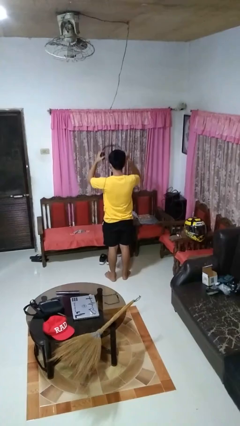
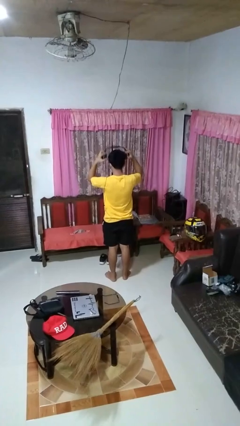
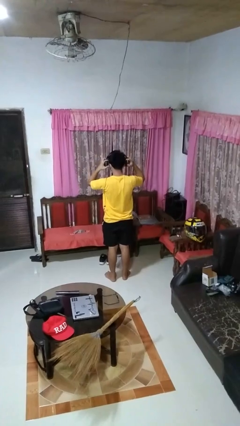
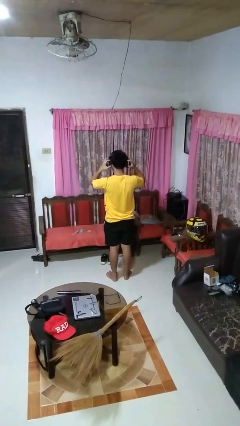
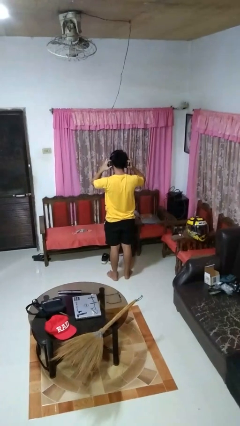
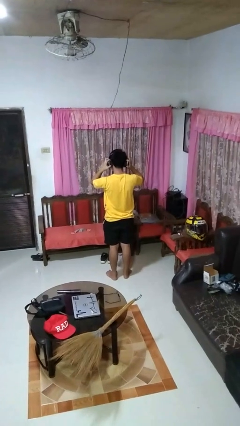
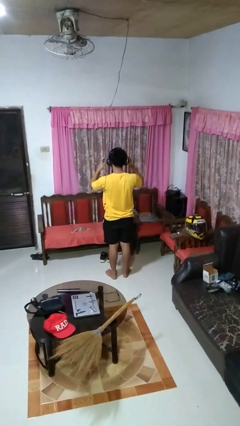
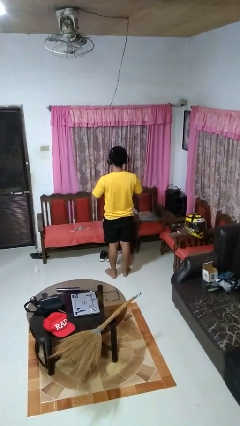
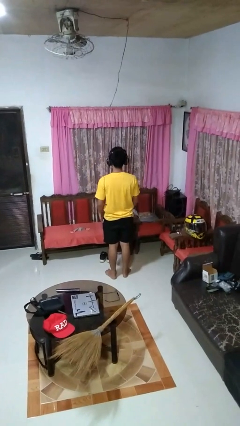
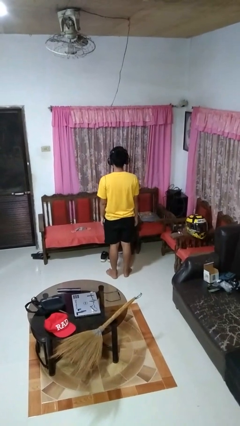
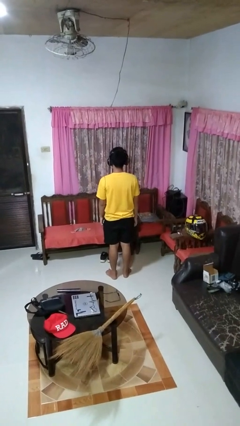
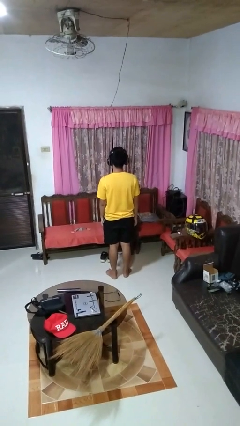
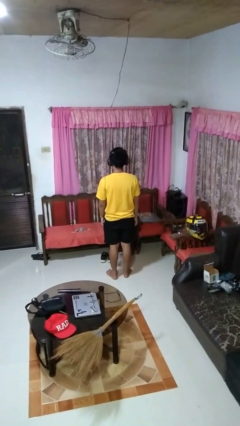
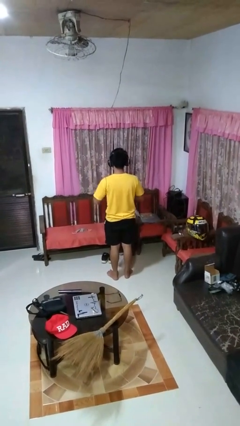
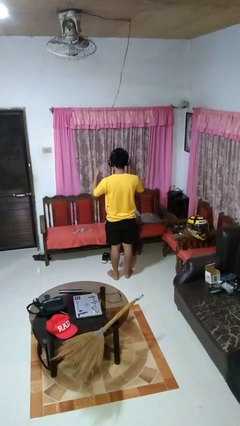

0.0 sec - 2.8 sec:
person puts on headphones

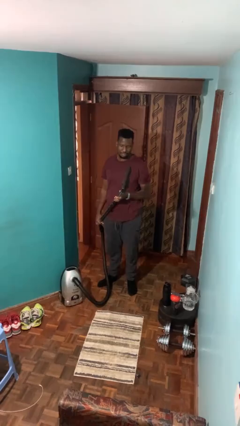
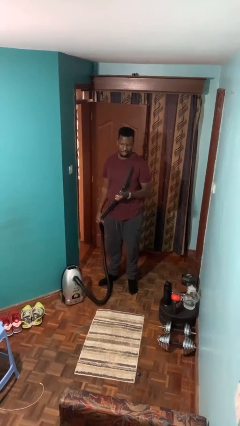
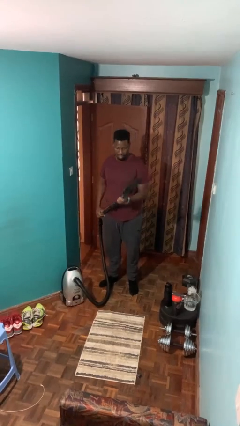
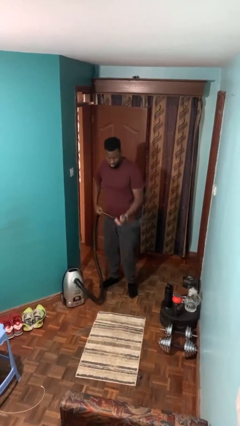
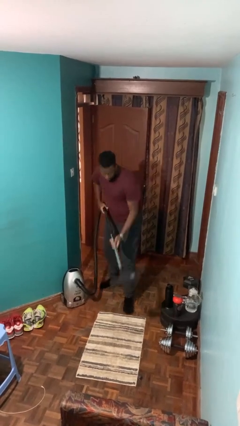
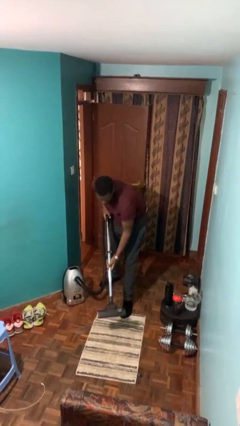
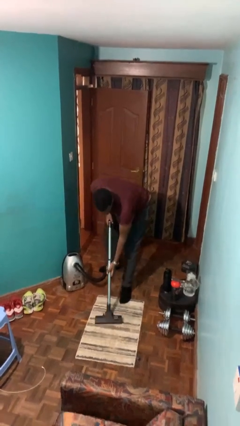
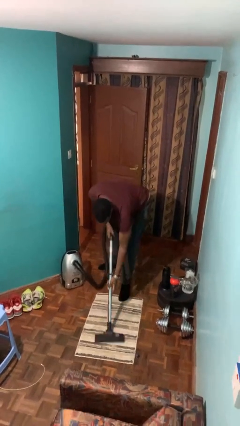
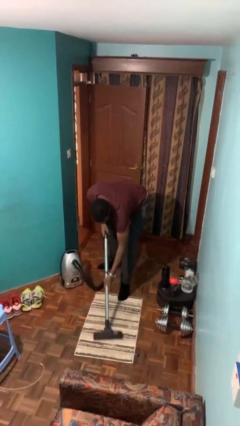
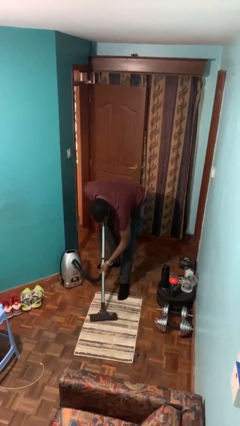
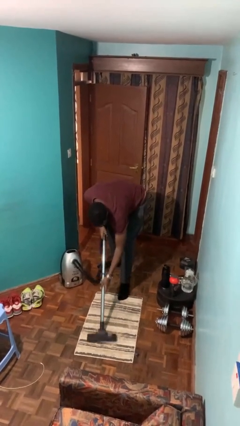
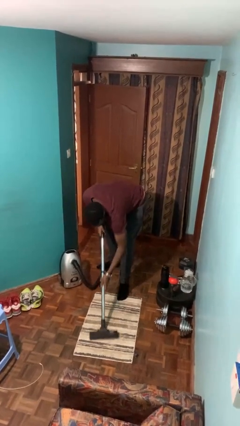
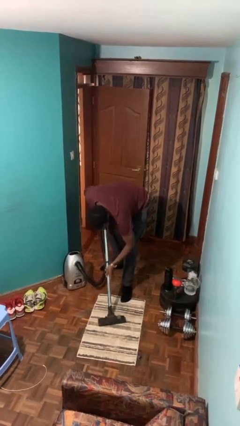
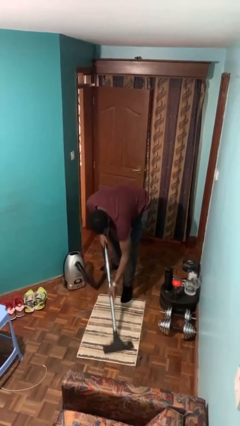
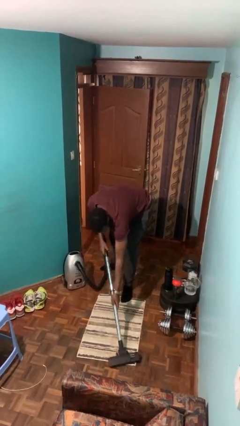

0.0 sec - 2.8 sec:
person vacuums carpet

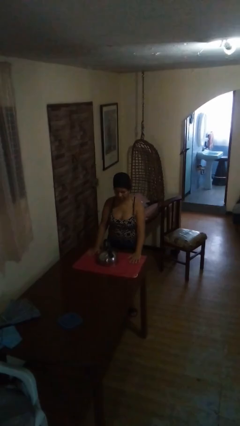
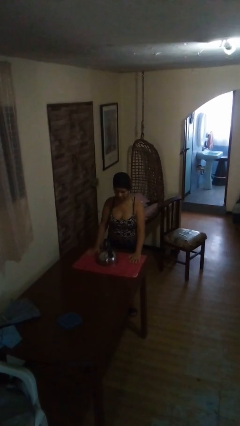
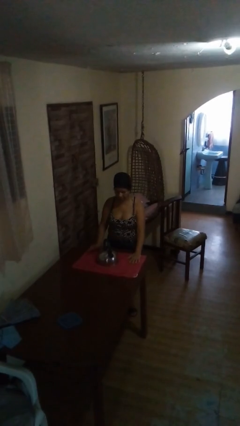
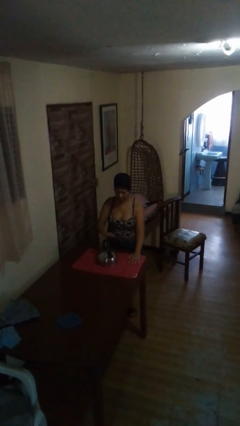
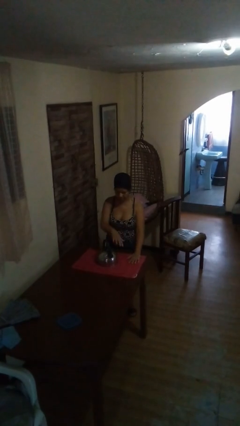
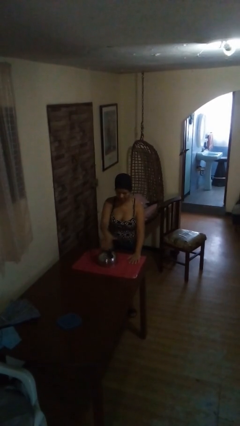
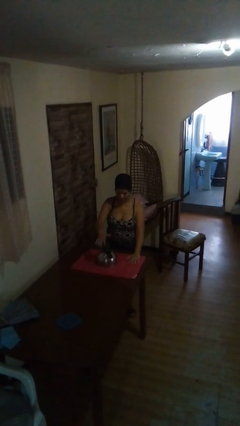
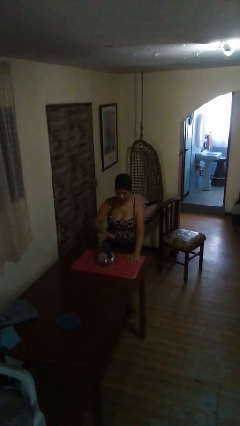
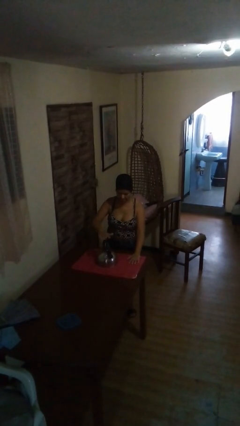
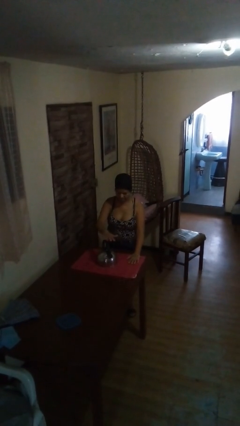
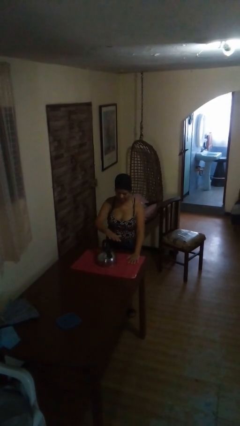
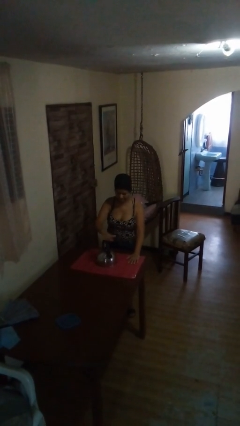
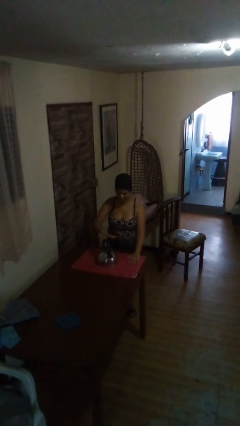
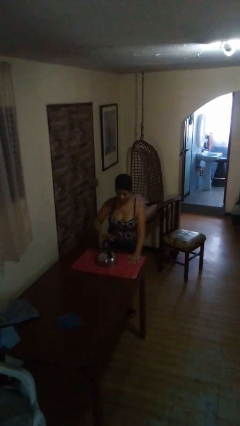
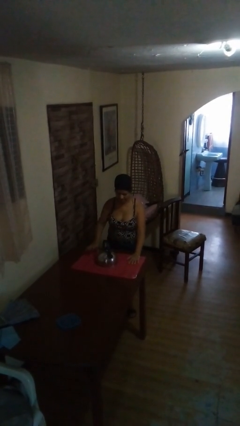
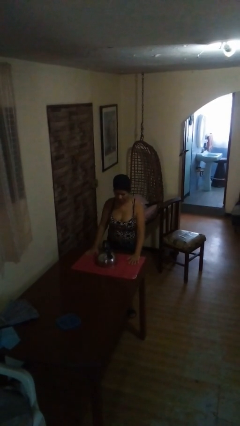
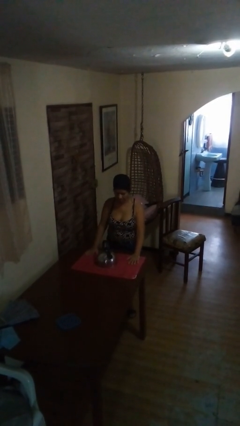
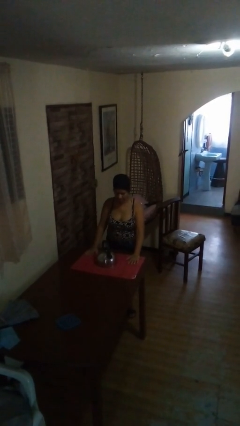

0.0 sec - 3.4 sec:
person waves hand over object

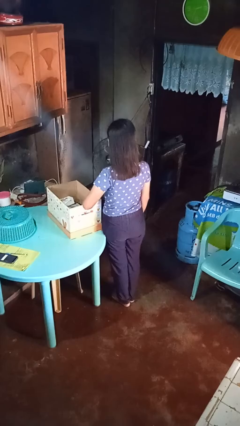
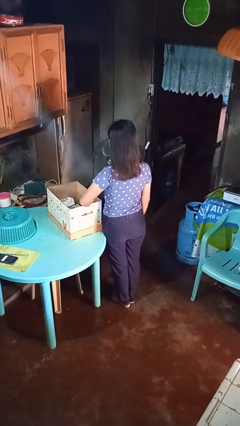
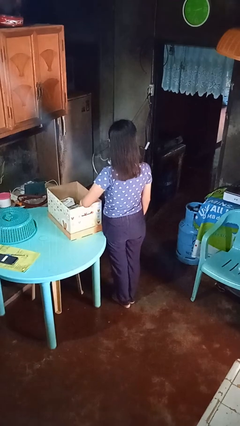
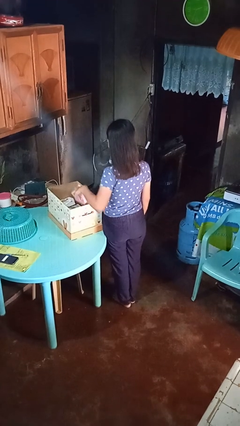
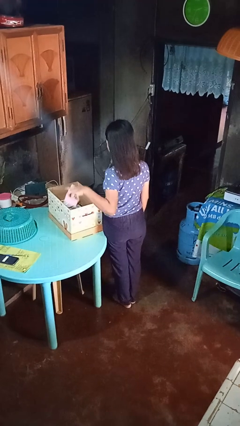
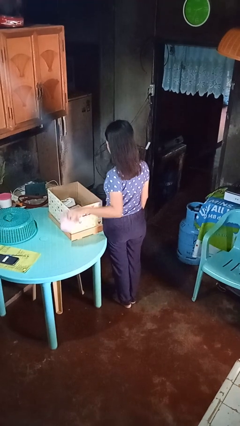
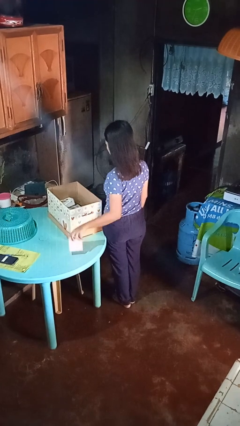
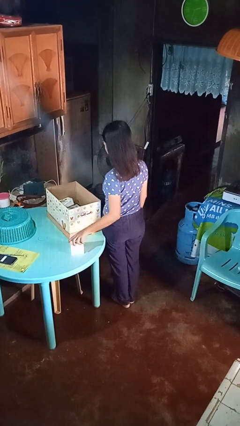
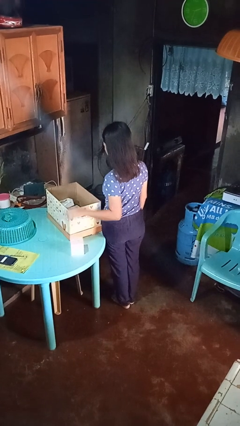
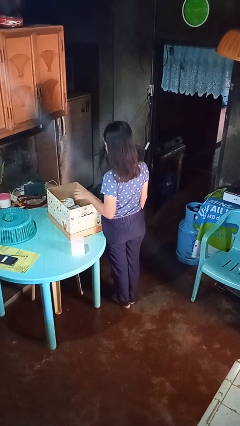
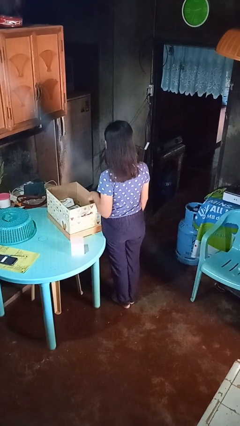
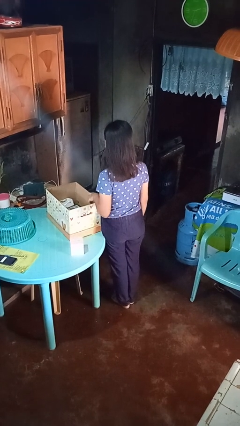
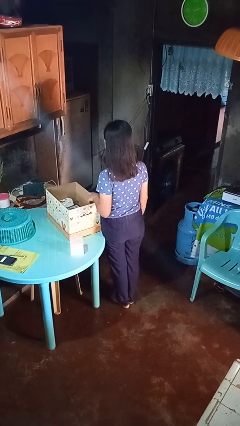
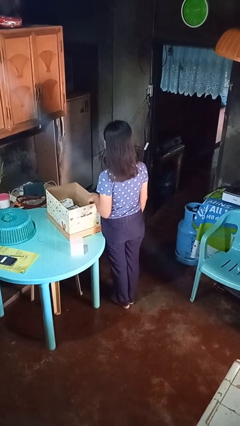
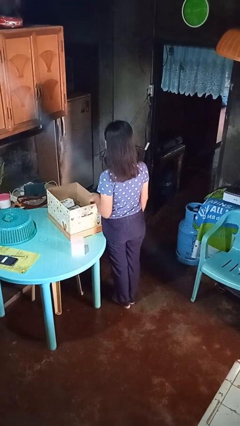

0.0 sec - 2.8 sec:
person takes object from box

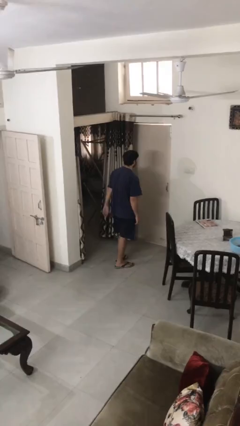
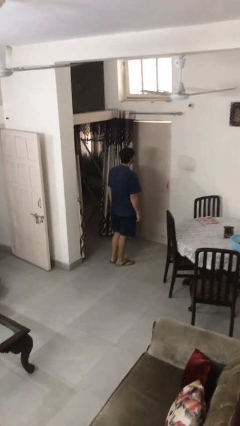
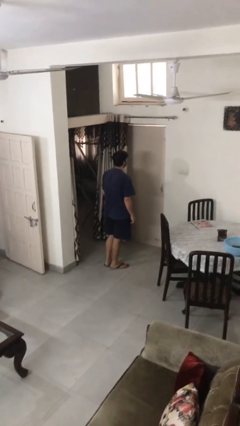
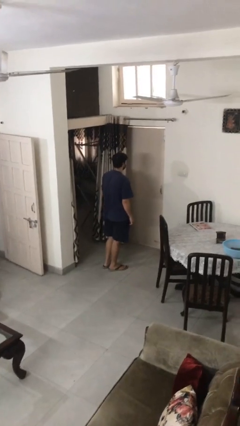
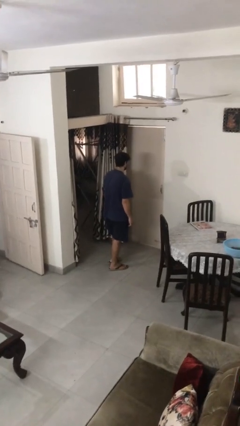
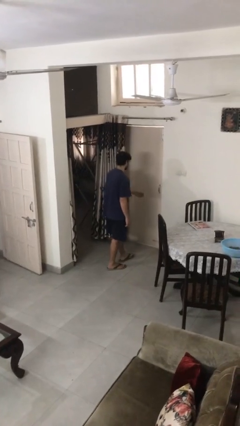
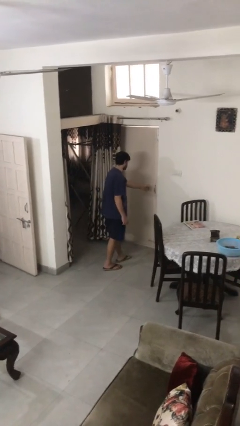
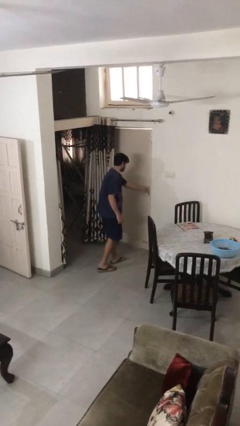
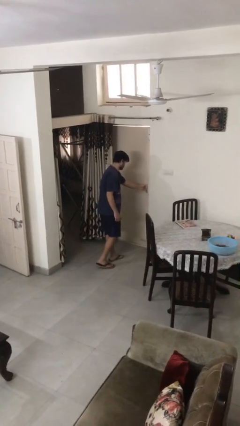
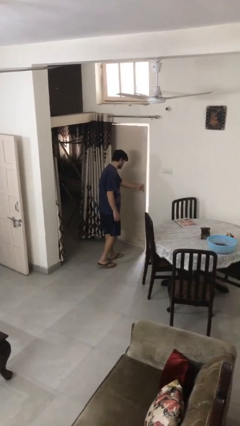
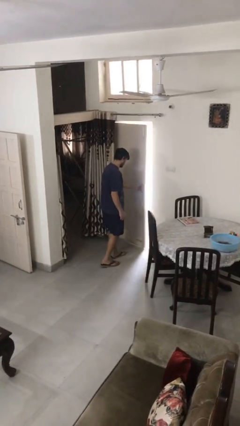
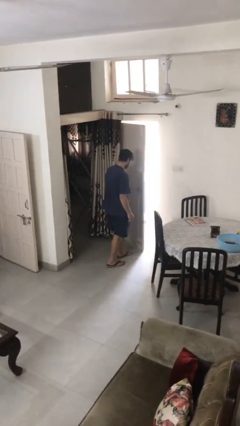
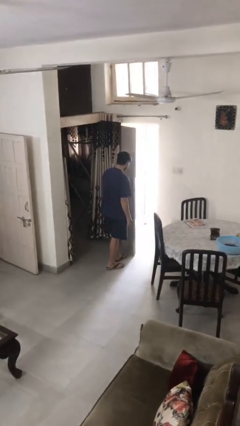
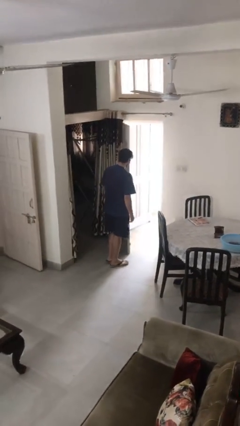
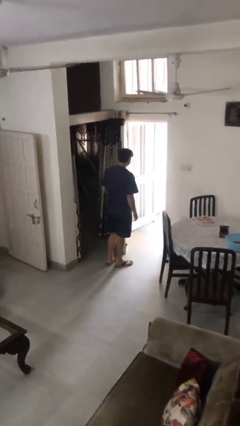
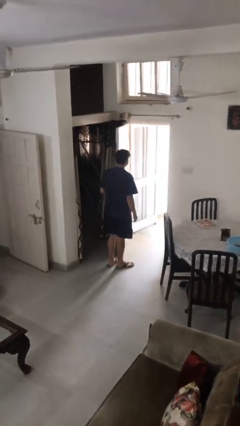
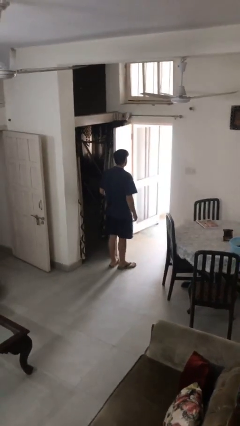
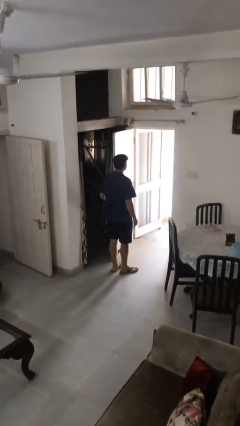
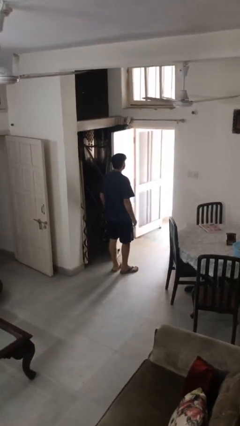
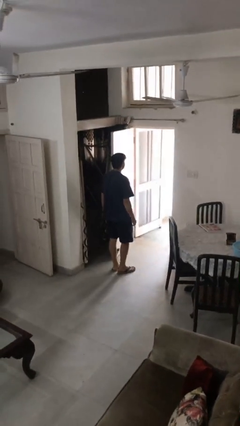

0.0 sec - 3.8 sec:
person opens facility door

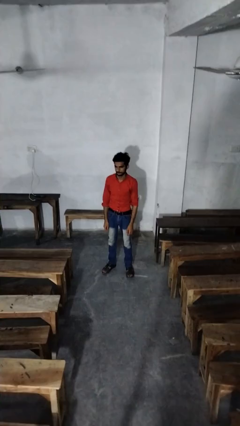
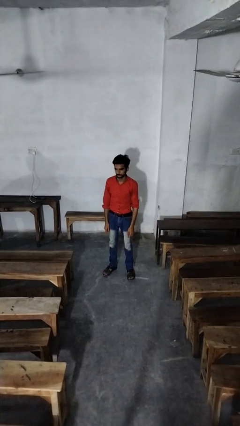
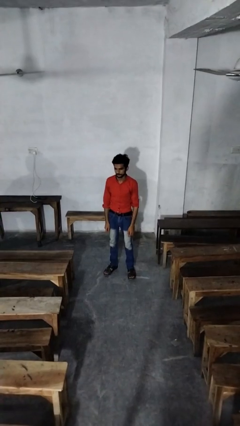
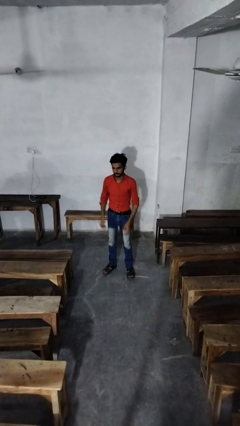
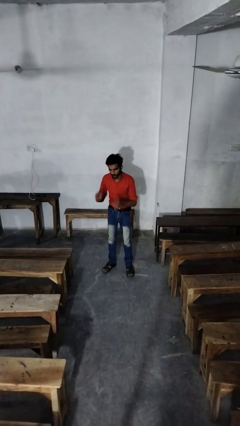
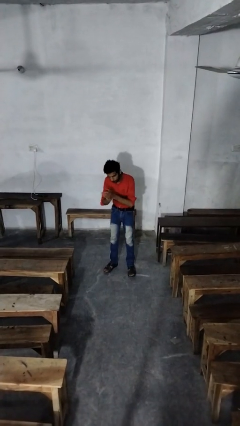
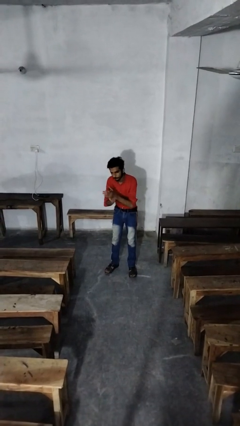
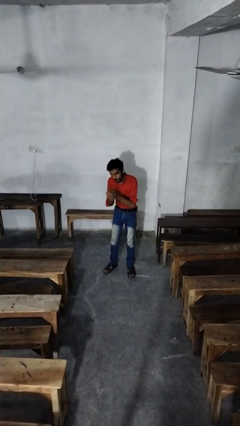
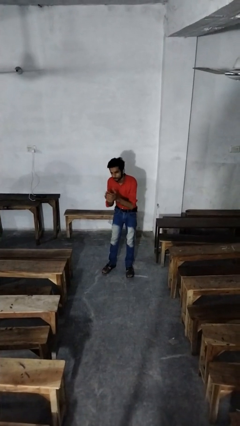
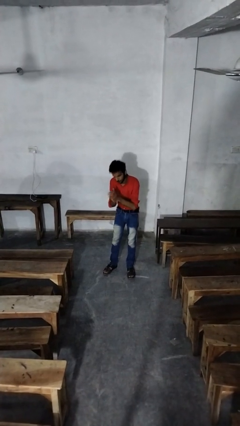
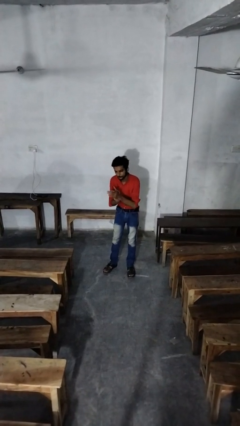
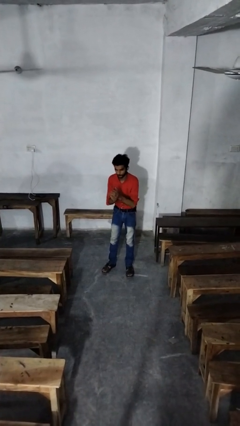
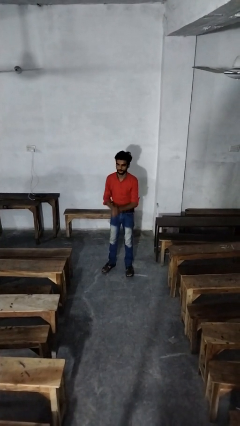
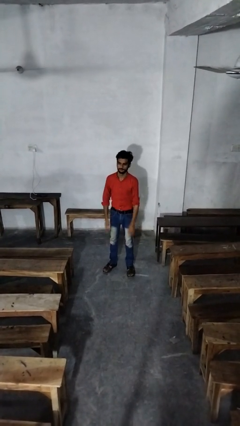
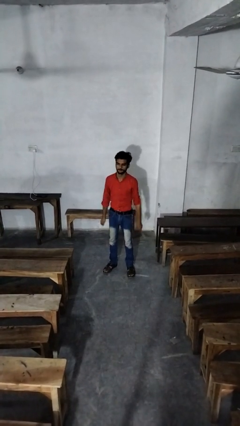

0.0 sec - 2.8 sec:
person claps hands
